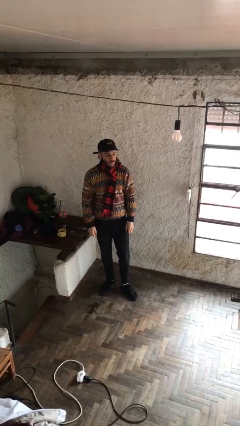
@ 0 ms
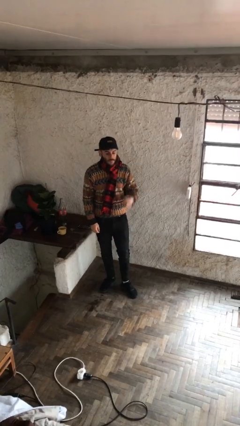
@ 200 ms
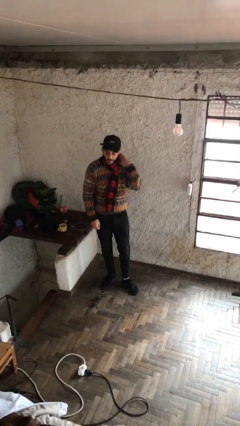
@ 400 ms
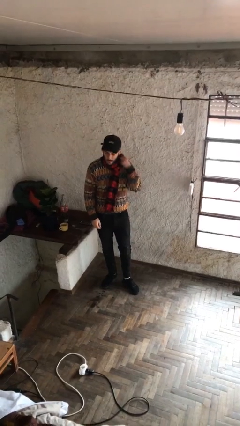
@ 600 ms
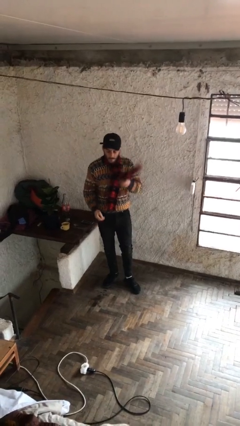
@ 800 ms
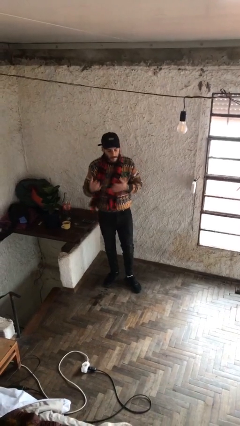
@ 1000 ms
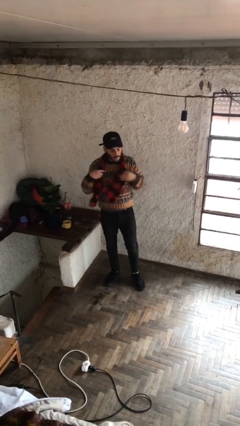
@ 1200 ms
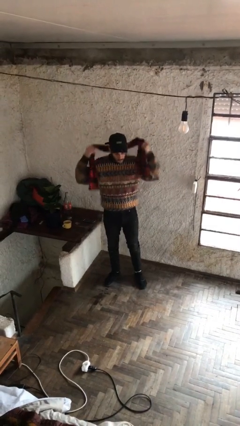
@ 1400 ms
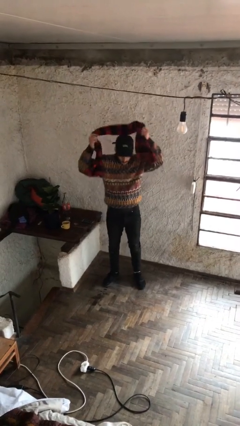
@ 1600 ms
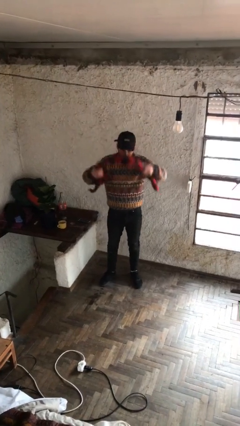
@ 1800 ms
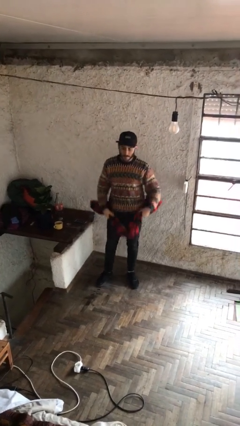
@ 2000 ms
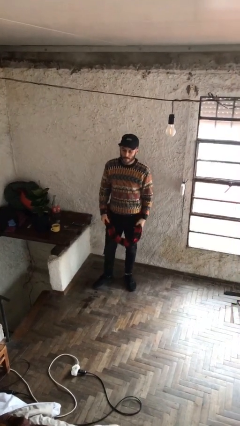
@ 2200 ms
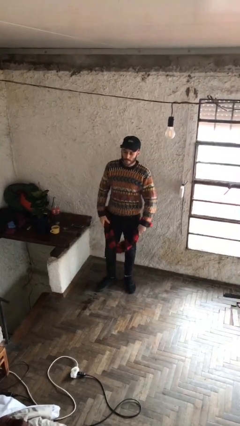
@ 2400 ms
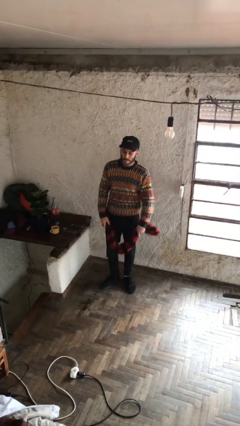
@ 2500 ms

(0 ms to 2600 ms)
person takes off scarf

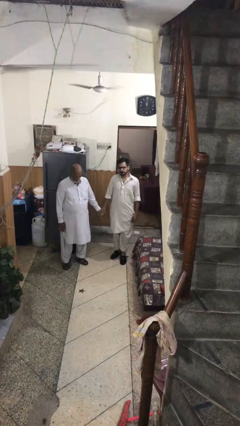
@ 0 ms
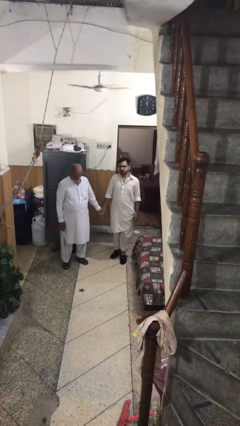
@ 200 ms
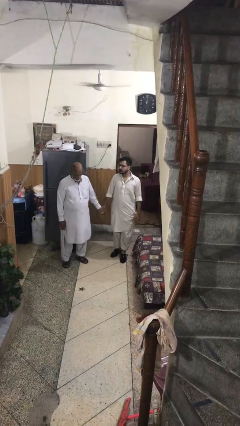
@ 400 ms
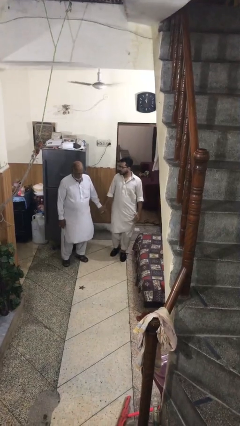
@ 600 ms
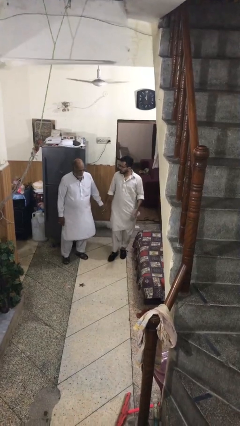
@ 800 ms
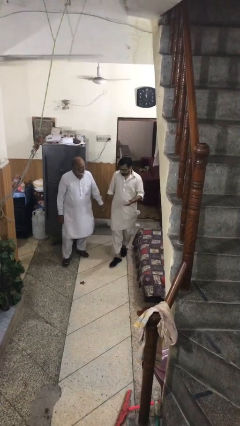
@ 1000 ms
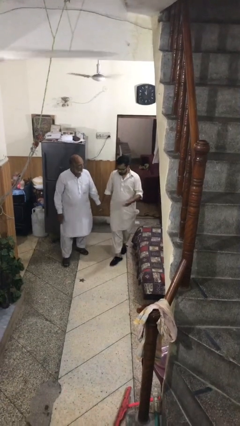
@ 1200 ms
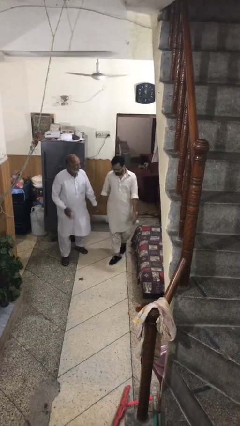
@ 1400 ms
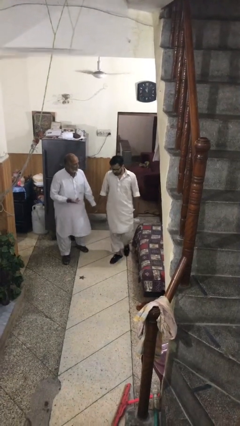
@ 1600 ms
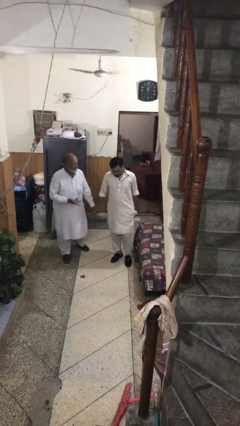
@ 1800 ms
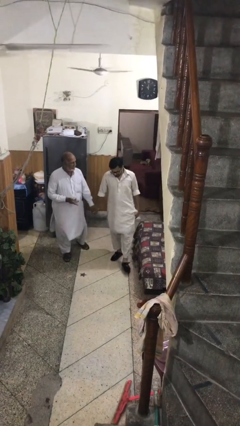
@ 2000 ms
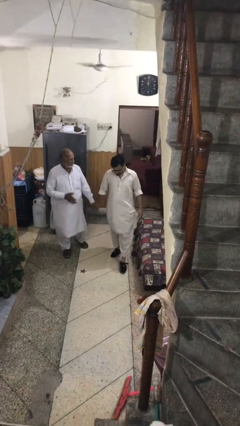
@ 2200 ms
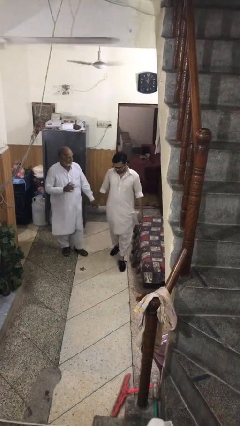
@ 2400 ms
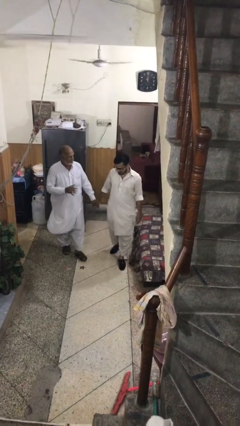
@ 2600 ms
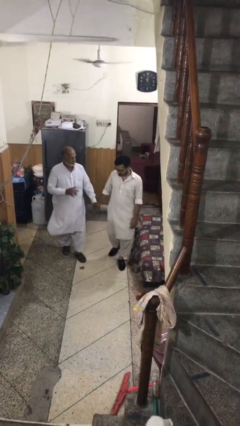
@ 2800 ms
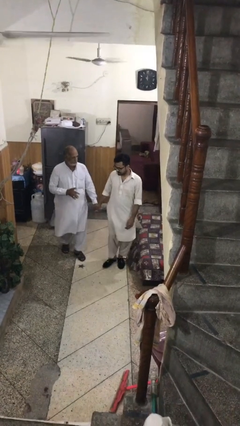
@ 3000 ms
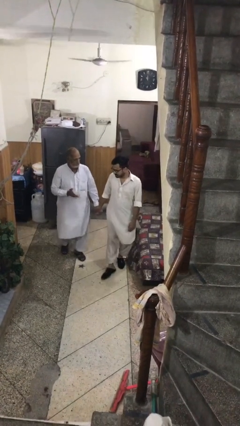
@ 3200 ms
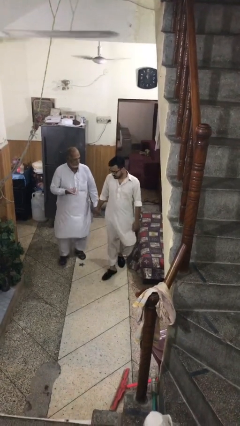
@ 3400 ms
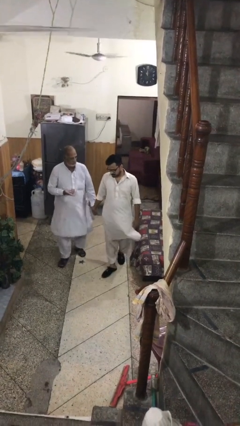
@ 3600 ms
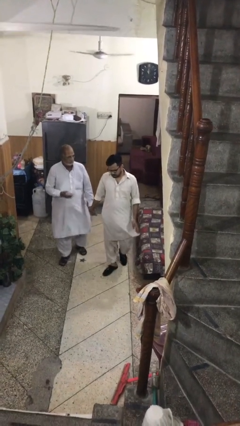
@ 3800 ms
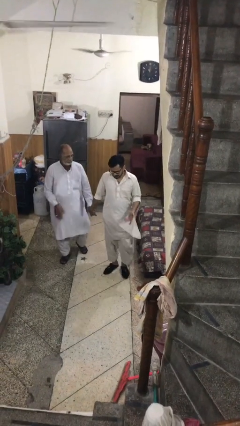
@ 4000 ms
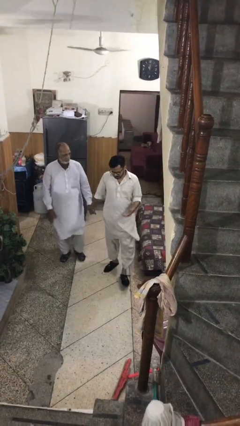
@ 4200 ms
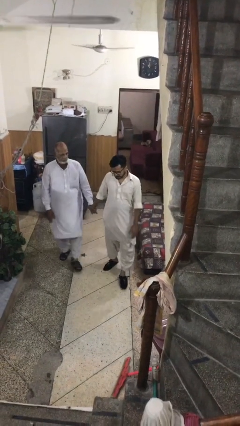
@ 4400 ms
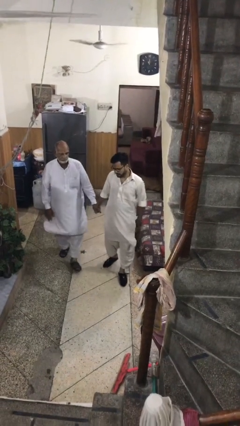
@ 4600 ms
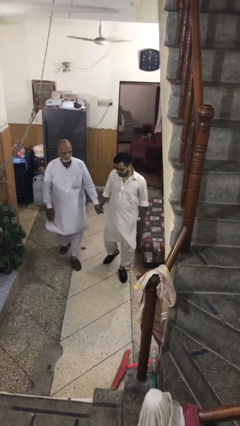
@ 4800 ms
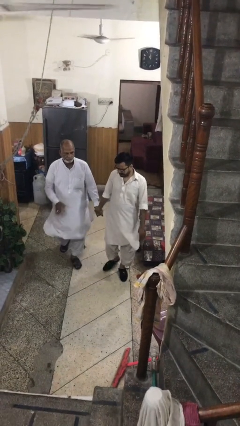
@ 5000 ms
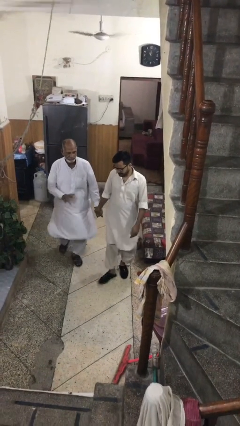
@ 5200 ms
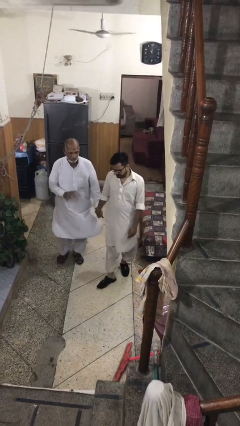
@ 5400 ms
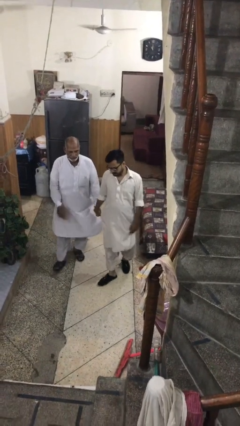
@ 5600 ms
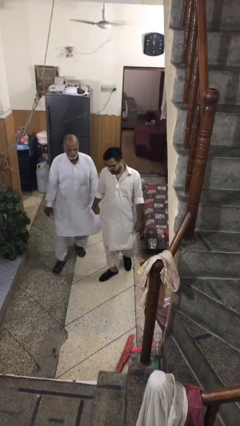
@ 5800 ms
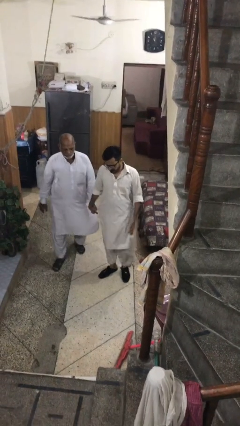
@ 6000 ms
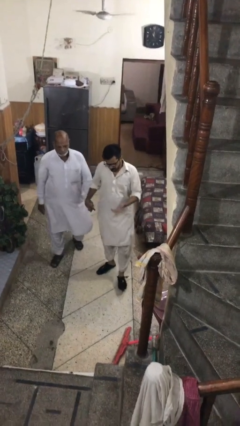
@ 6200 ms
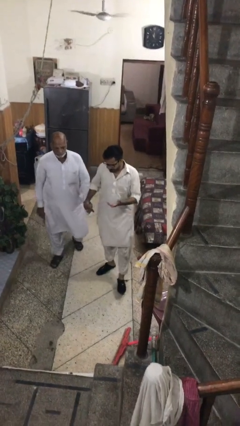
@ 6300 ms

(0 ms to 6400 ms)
person holds hand

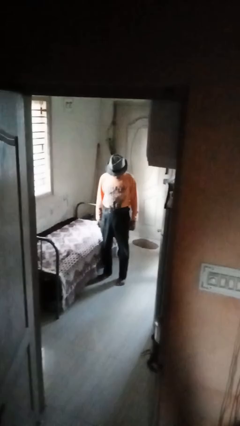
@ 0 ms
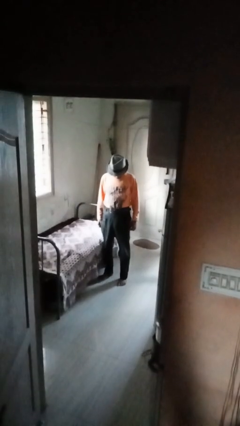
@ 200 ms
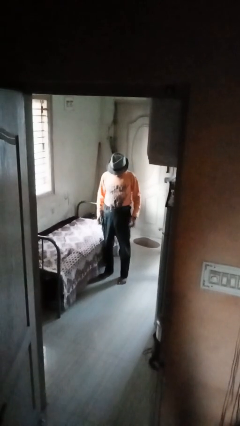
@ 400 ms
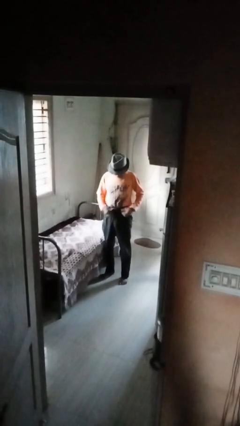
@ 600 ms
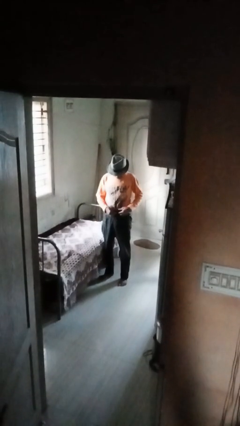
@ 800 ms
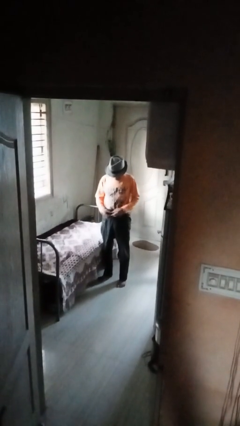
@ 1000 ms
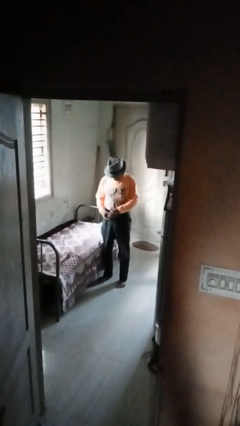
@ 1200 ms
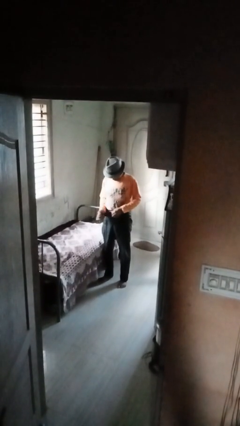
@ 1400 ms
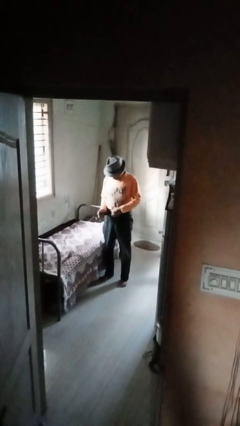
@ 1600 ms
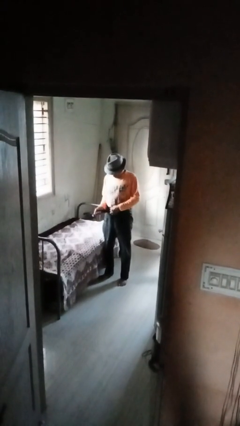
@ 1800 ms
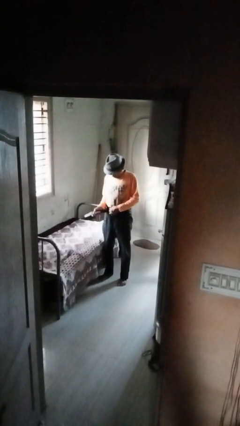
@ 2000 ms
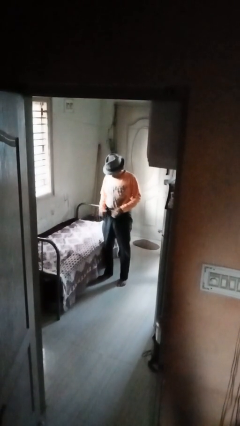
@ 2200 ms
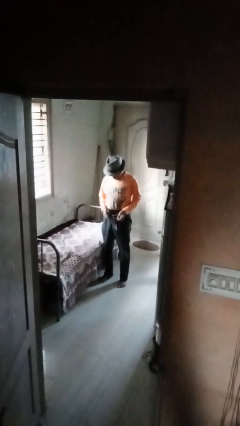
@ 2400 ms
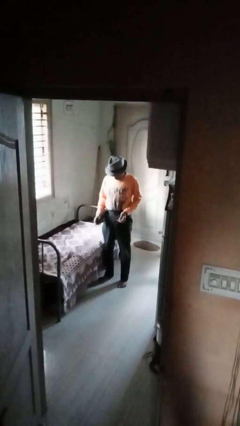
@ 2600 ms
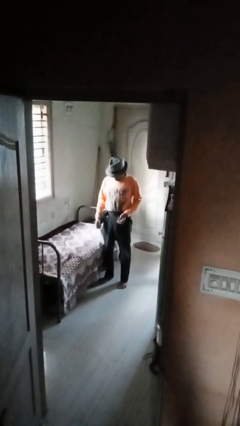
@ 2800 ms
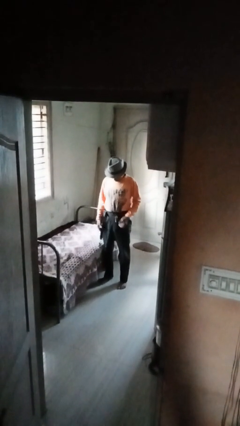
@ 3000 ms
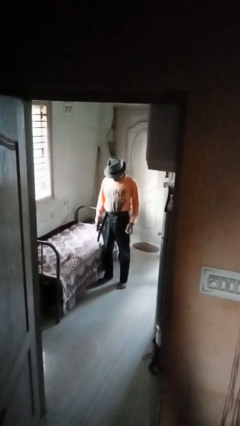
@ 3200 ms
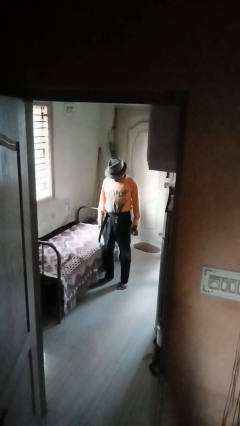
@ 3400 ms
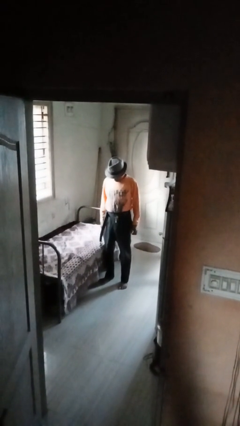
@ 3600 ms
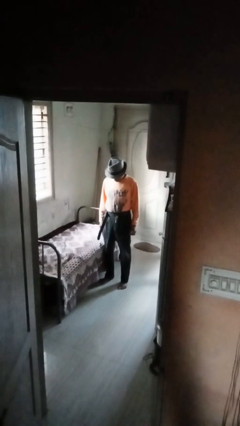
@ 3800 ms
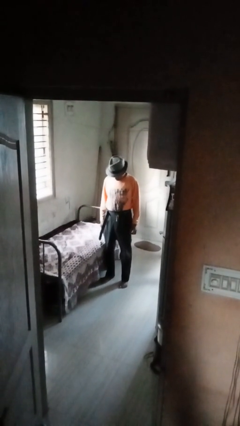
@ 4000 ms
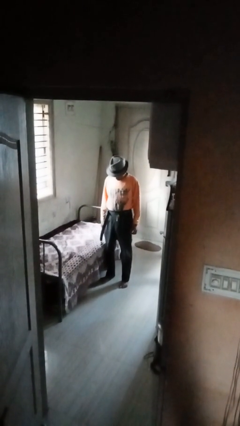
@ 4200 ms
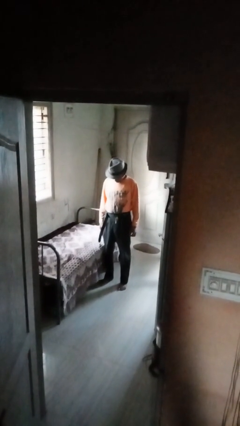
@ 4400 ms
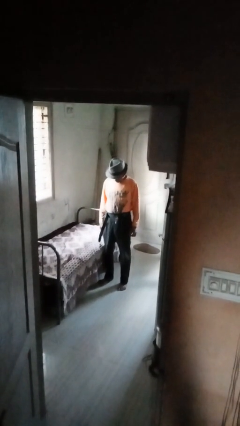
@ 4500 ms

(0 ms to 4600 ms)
person takes off belt

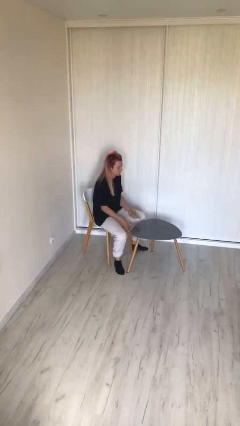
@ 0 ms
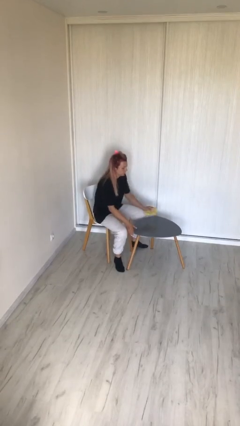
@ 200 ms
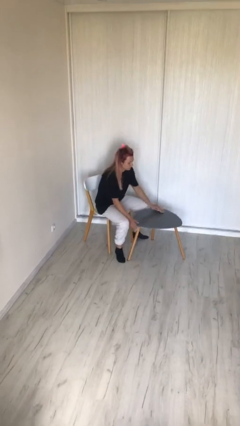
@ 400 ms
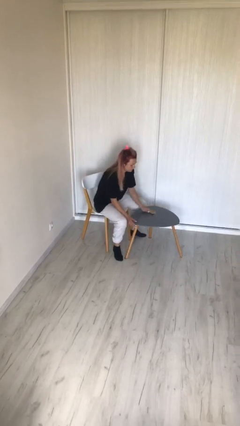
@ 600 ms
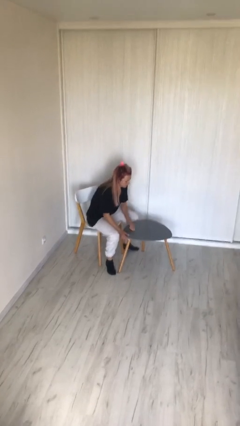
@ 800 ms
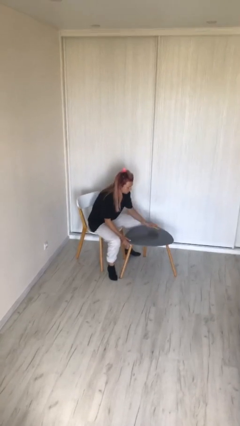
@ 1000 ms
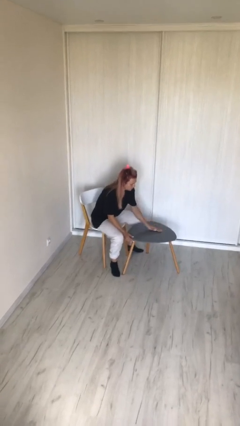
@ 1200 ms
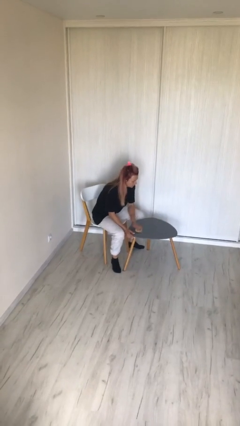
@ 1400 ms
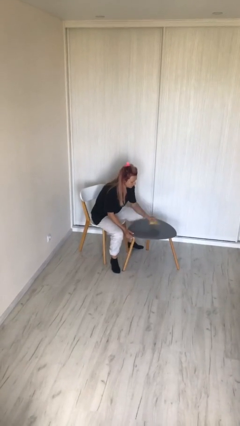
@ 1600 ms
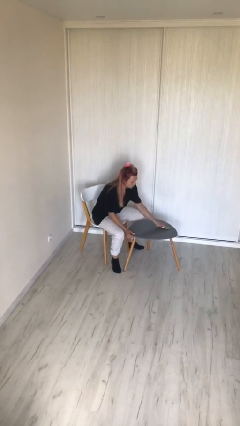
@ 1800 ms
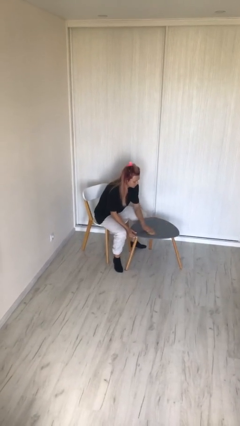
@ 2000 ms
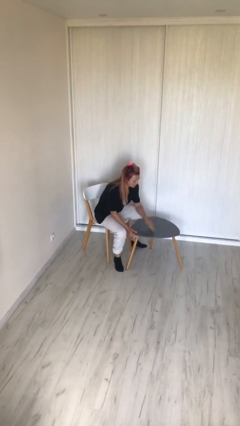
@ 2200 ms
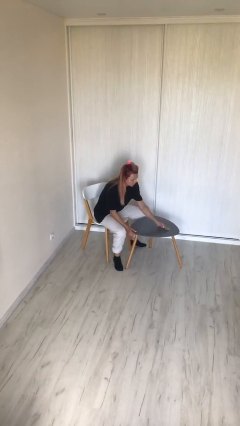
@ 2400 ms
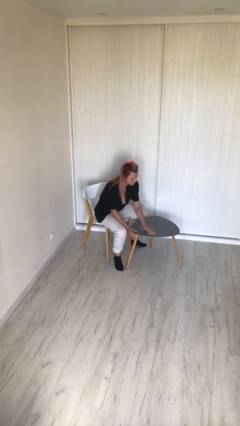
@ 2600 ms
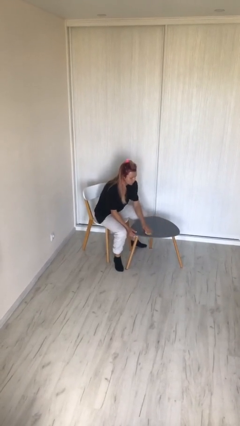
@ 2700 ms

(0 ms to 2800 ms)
person cleans table with rag

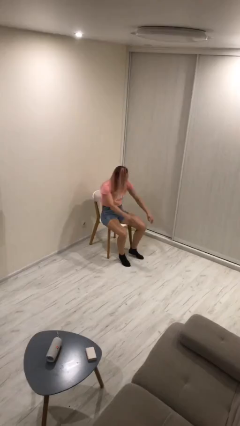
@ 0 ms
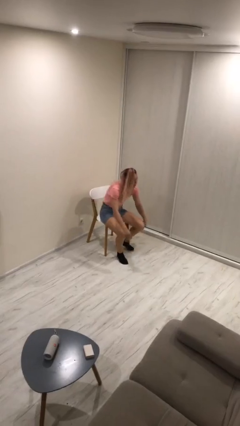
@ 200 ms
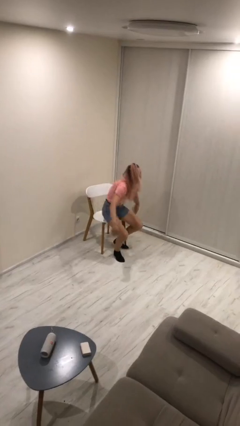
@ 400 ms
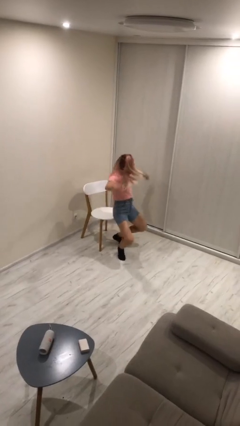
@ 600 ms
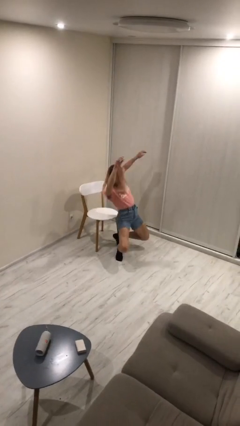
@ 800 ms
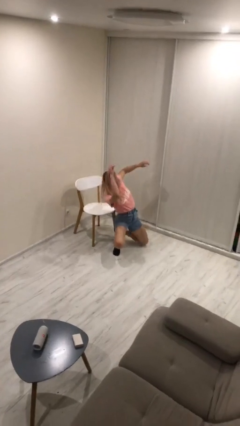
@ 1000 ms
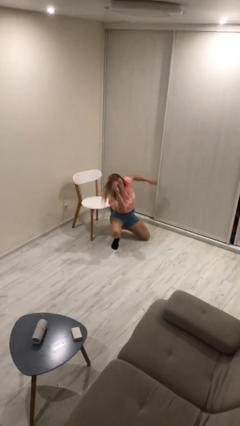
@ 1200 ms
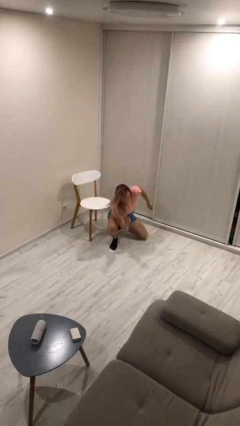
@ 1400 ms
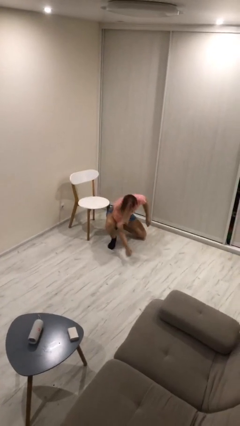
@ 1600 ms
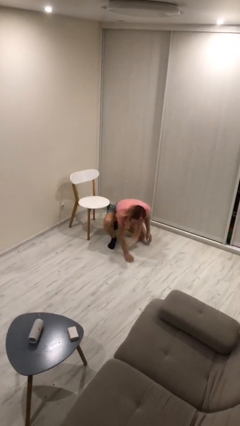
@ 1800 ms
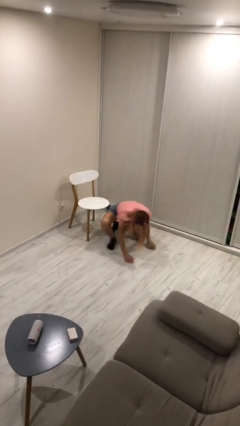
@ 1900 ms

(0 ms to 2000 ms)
person falls from chair
